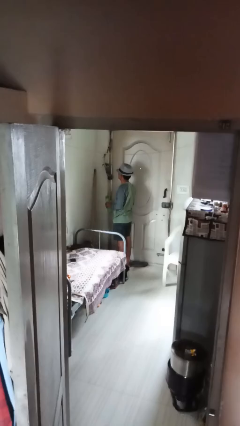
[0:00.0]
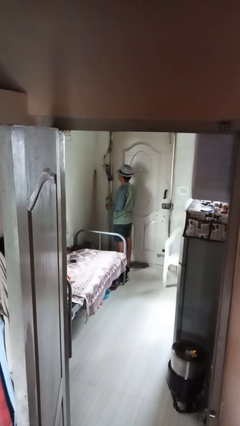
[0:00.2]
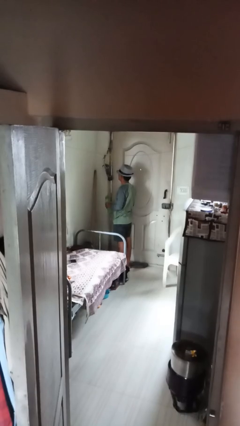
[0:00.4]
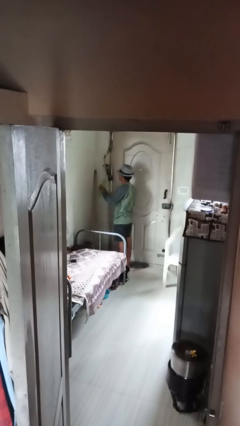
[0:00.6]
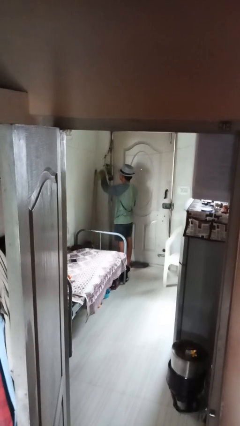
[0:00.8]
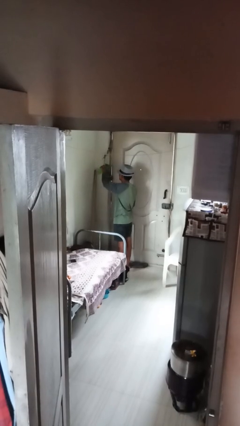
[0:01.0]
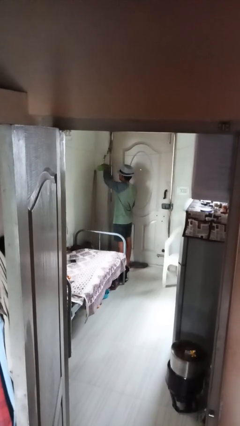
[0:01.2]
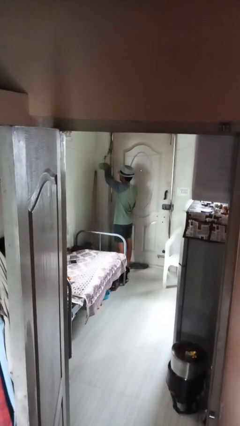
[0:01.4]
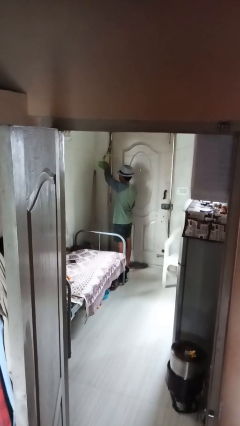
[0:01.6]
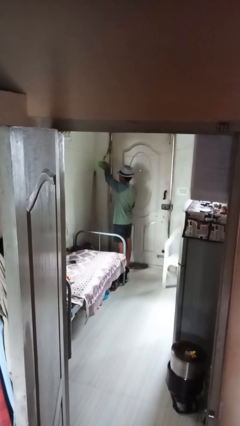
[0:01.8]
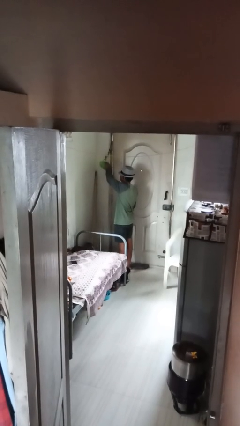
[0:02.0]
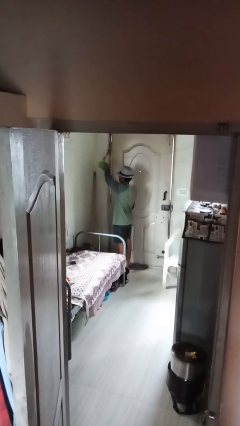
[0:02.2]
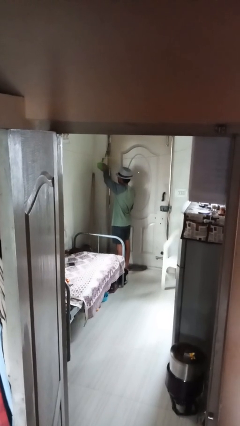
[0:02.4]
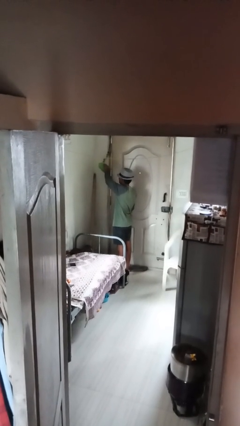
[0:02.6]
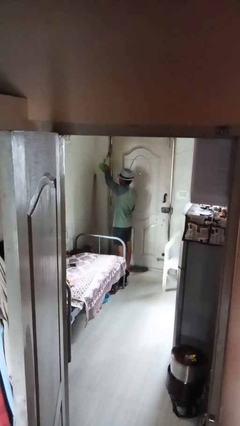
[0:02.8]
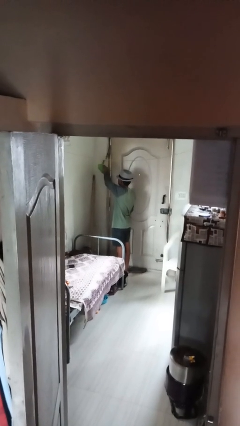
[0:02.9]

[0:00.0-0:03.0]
person waters houseplant

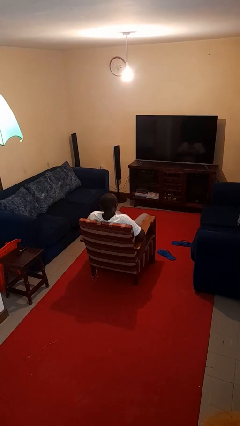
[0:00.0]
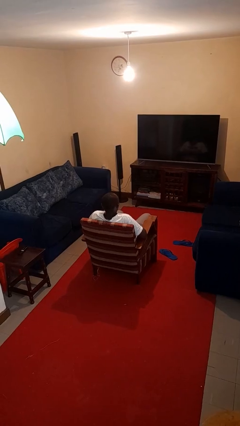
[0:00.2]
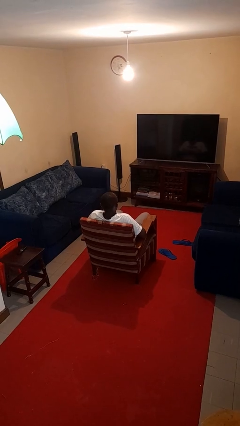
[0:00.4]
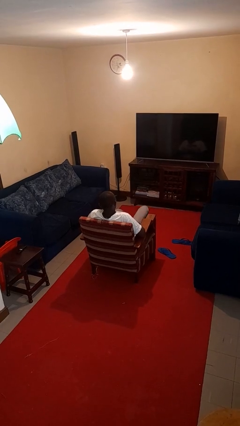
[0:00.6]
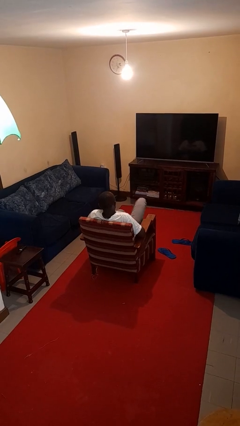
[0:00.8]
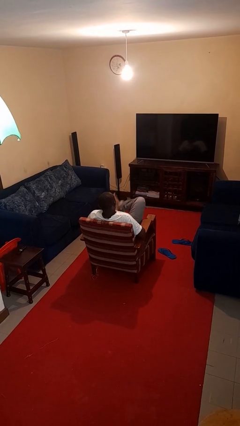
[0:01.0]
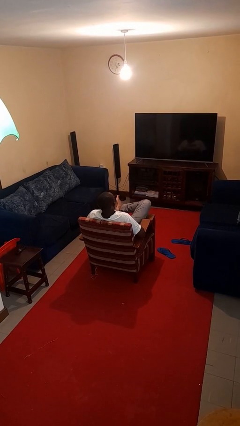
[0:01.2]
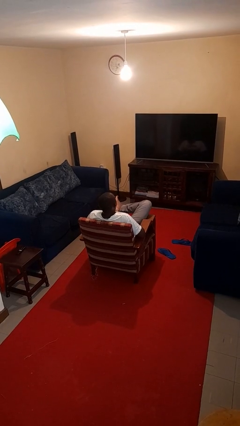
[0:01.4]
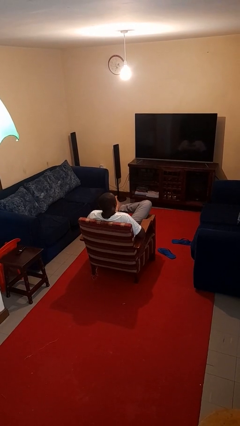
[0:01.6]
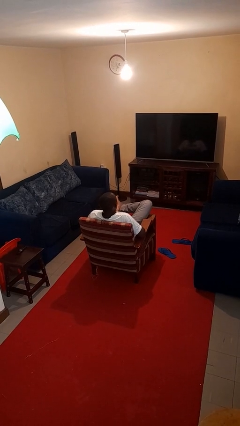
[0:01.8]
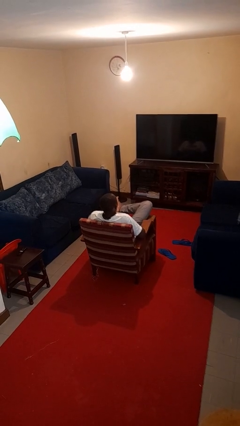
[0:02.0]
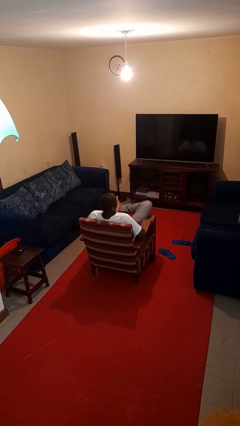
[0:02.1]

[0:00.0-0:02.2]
person crosses legs

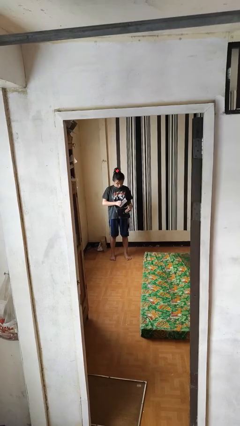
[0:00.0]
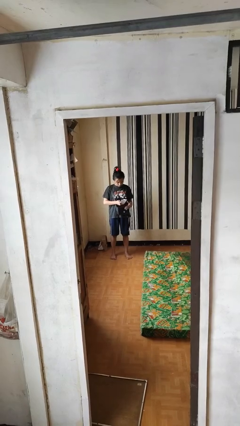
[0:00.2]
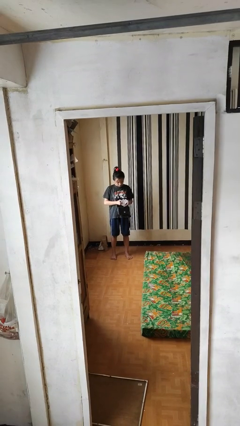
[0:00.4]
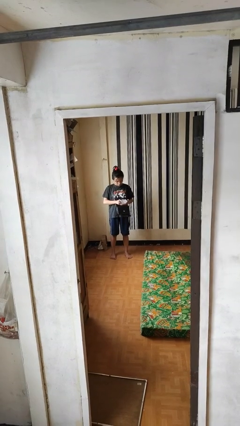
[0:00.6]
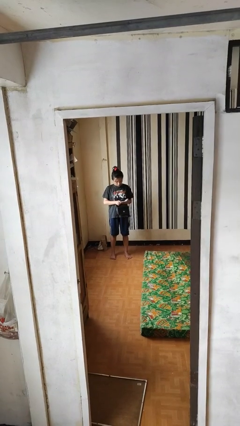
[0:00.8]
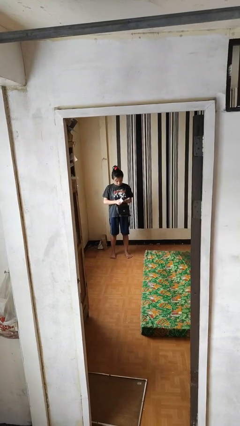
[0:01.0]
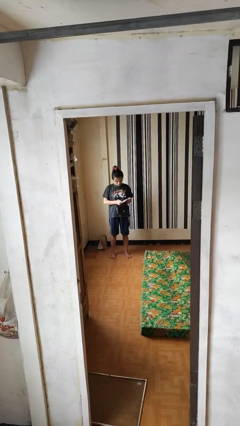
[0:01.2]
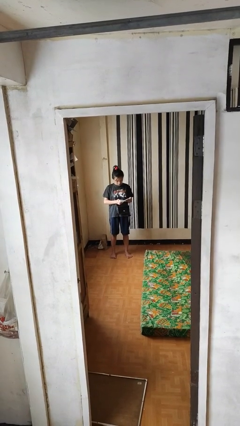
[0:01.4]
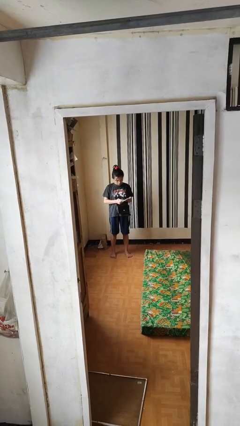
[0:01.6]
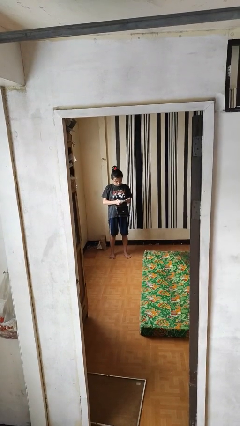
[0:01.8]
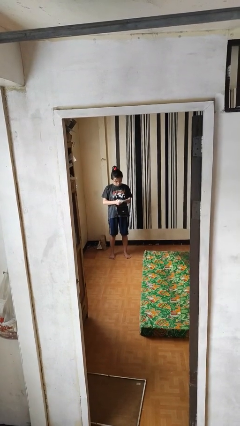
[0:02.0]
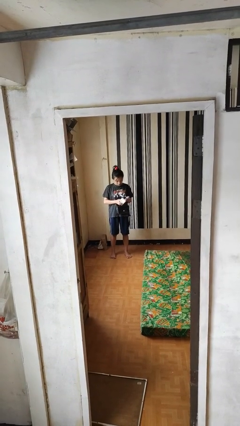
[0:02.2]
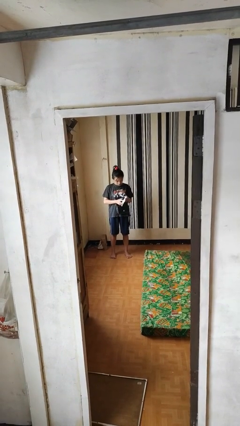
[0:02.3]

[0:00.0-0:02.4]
person takes object from purse

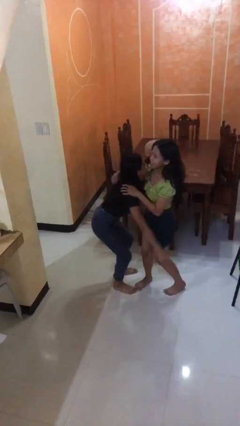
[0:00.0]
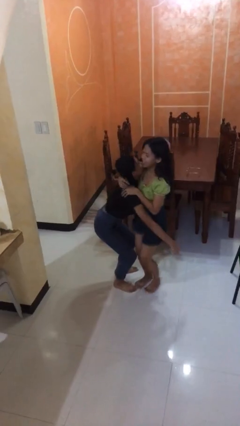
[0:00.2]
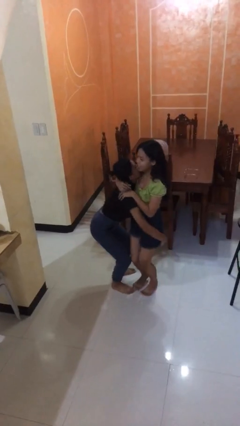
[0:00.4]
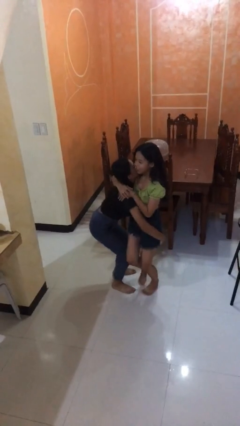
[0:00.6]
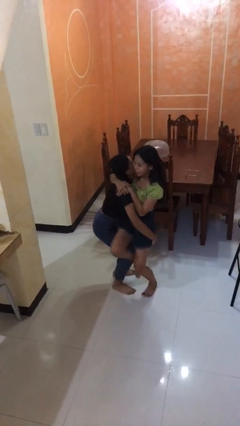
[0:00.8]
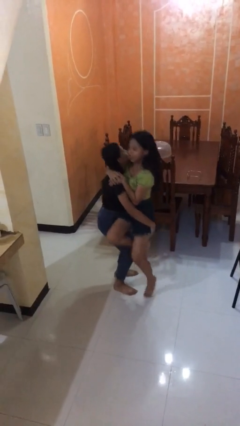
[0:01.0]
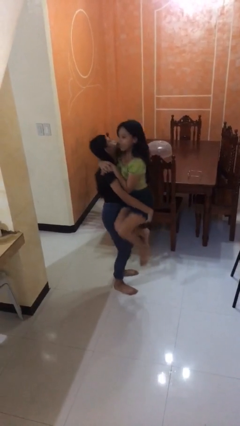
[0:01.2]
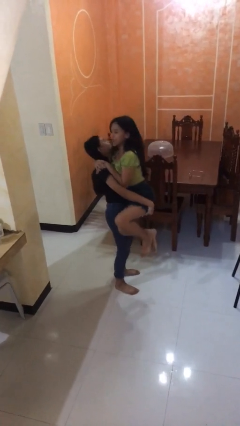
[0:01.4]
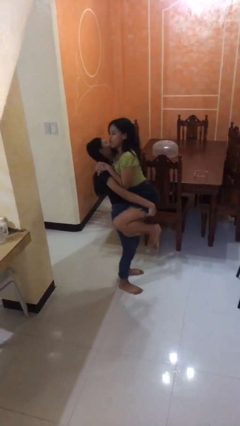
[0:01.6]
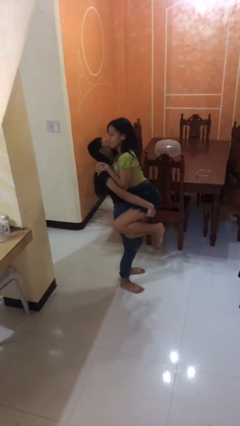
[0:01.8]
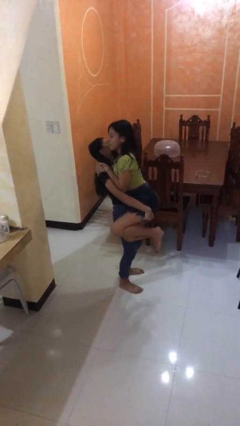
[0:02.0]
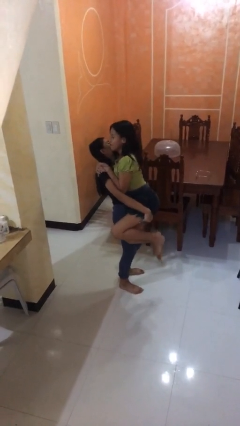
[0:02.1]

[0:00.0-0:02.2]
person picks up person

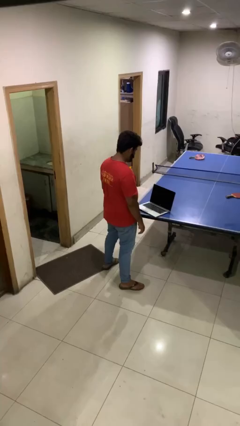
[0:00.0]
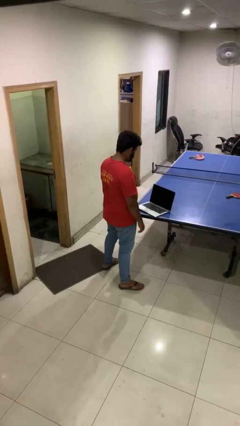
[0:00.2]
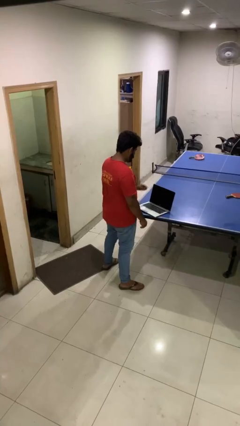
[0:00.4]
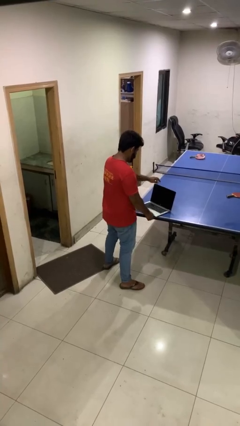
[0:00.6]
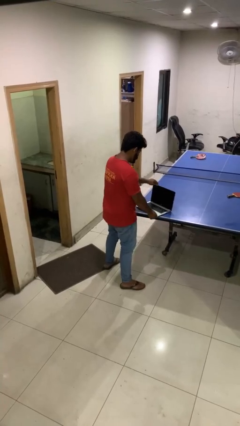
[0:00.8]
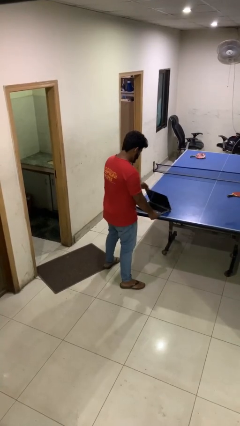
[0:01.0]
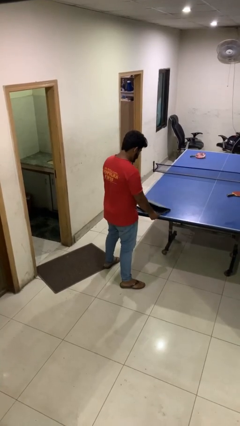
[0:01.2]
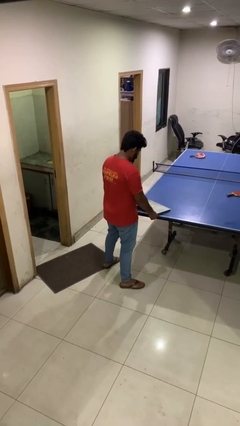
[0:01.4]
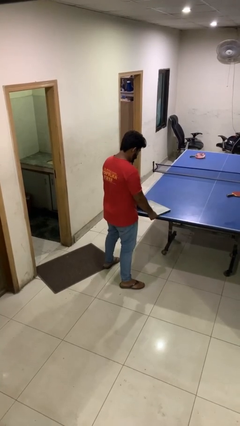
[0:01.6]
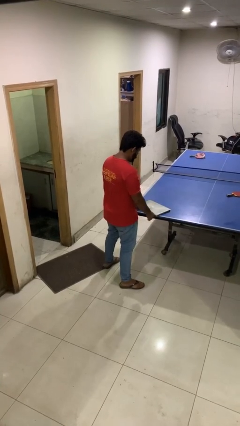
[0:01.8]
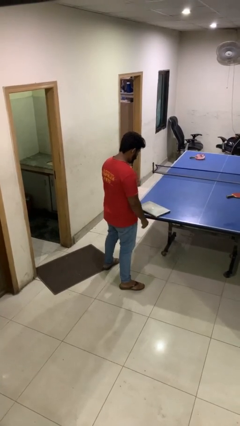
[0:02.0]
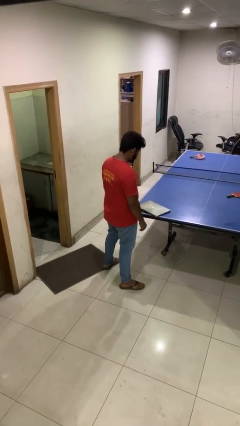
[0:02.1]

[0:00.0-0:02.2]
person closes laptop

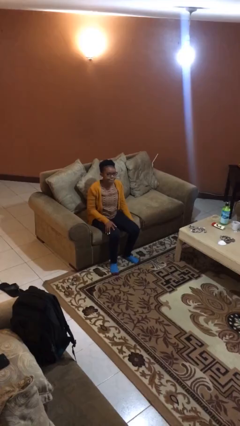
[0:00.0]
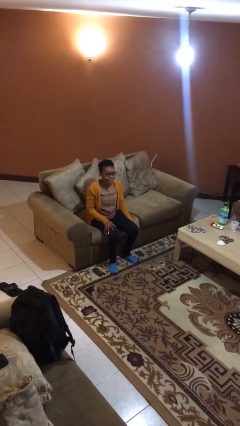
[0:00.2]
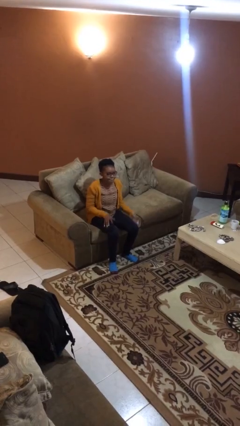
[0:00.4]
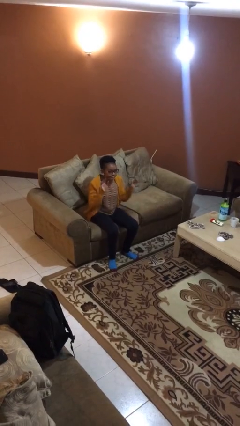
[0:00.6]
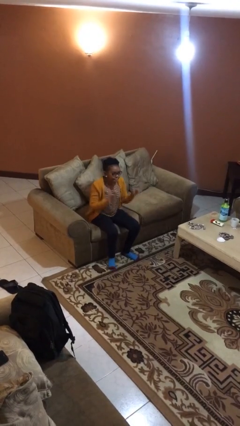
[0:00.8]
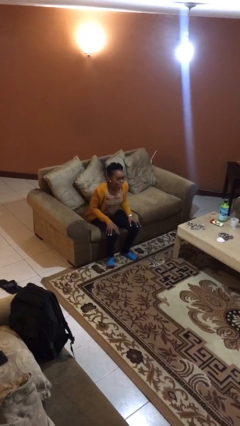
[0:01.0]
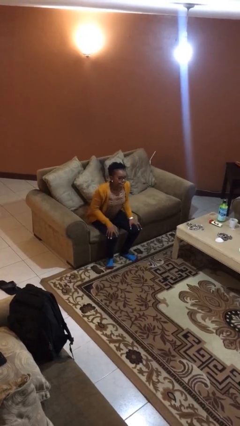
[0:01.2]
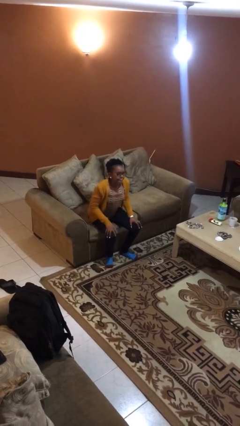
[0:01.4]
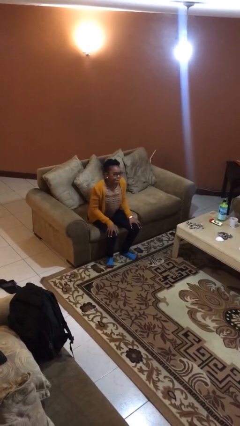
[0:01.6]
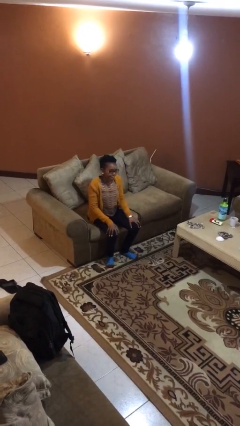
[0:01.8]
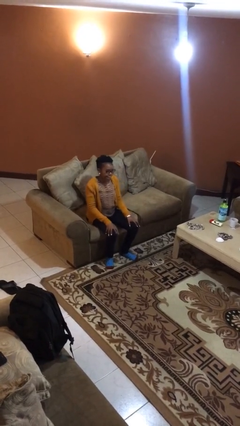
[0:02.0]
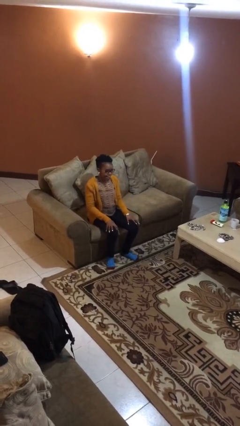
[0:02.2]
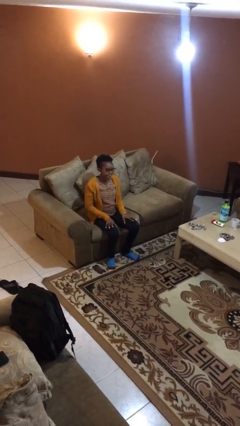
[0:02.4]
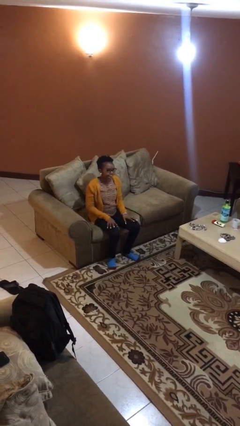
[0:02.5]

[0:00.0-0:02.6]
person slaps hands on thighs

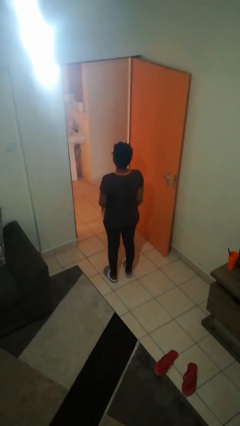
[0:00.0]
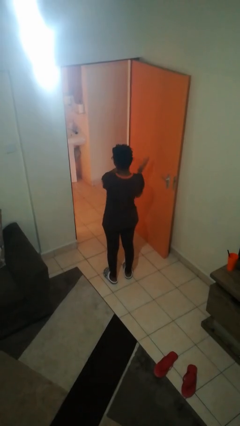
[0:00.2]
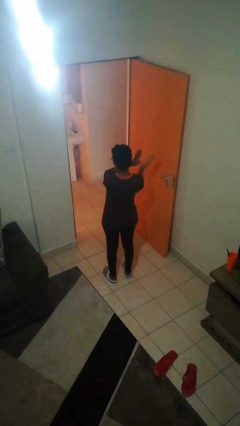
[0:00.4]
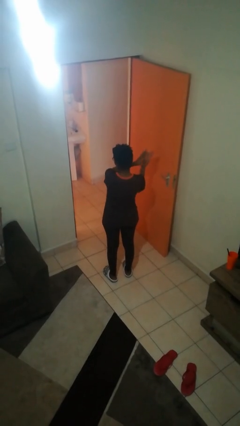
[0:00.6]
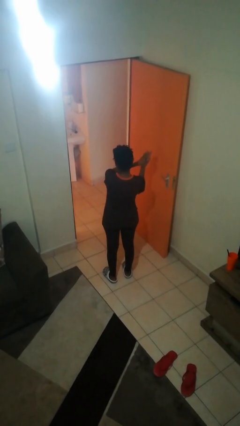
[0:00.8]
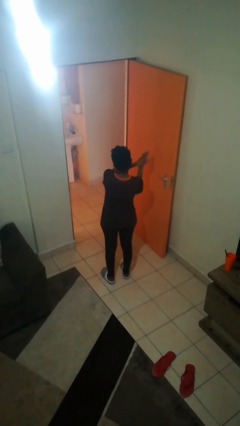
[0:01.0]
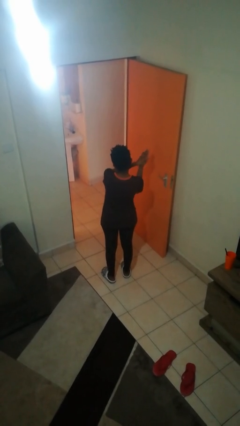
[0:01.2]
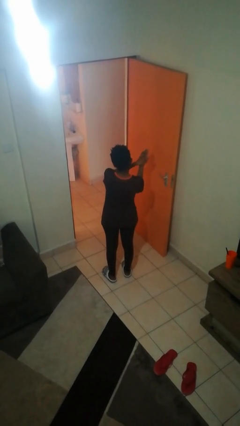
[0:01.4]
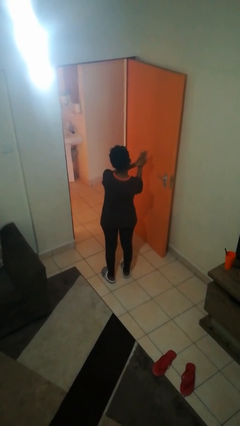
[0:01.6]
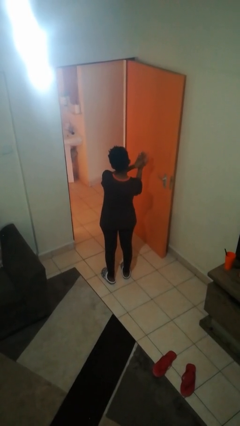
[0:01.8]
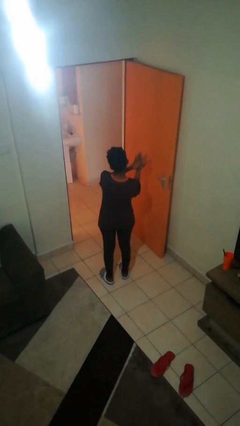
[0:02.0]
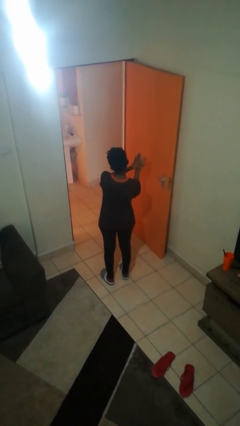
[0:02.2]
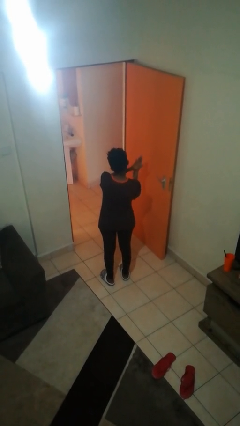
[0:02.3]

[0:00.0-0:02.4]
person claps hands
